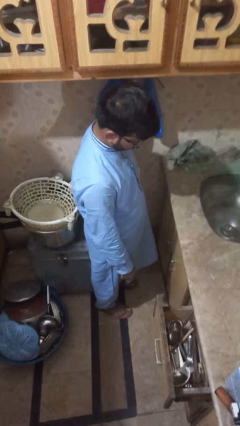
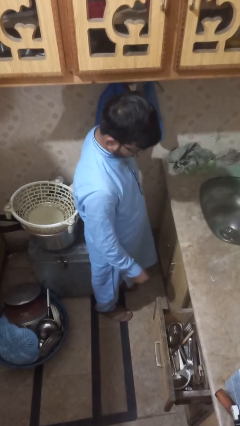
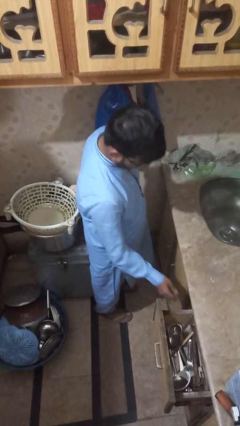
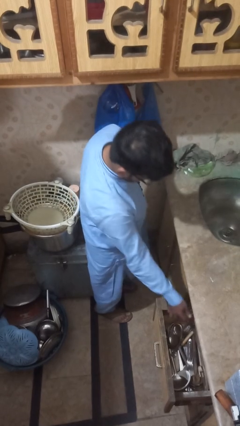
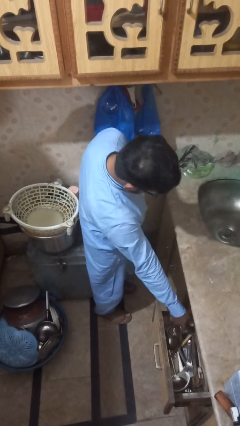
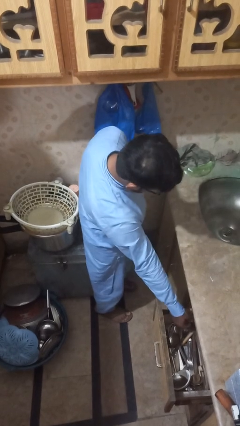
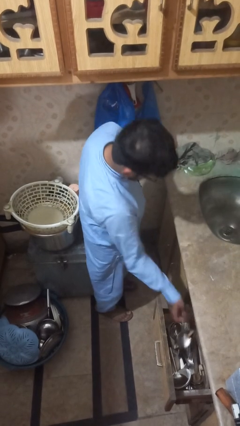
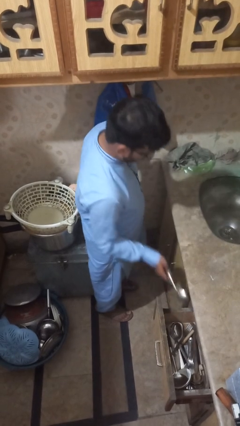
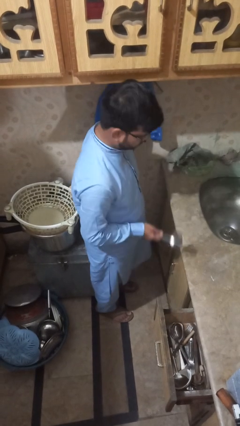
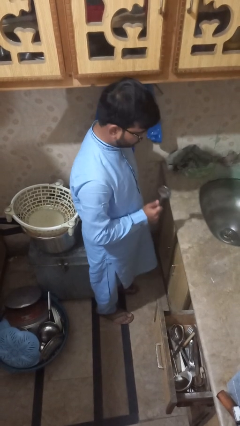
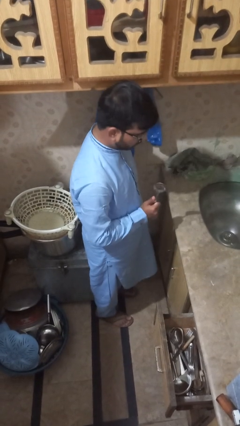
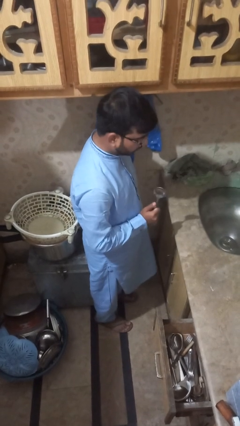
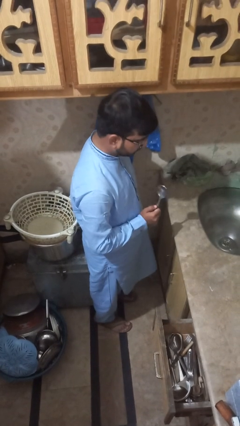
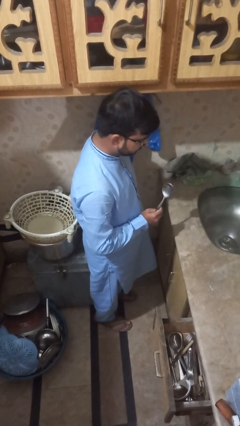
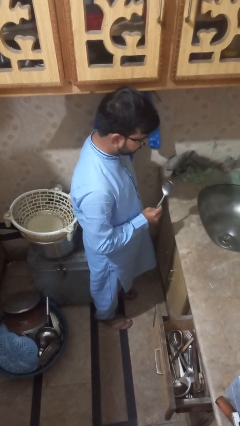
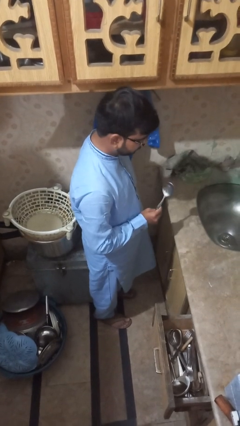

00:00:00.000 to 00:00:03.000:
person takes object from kitchen drawer

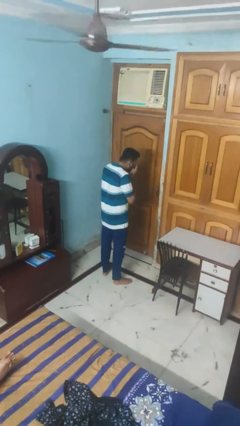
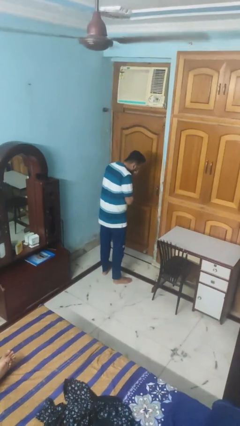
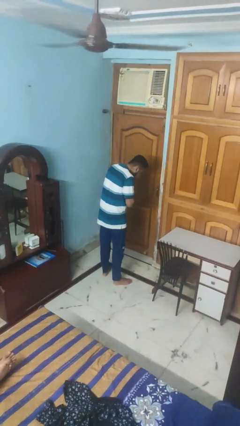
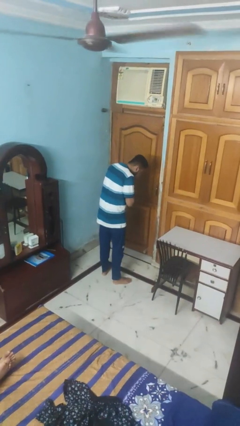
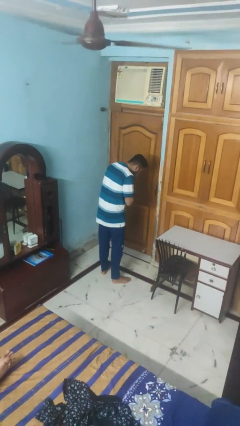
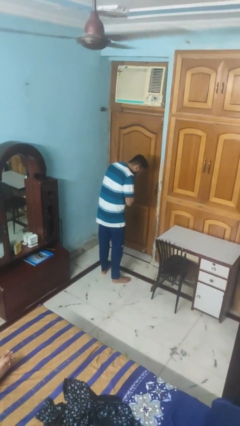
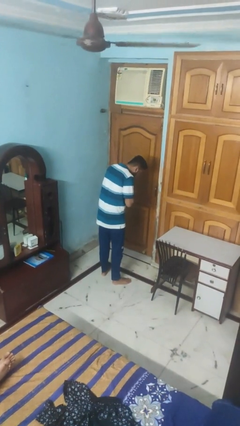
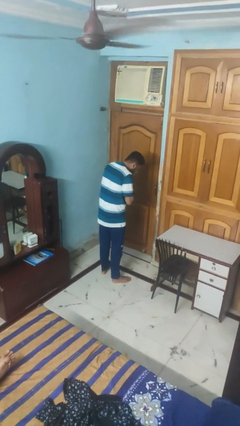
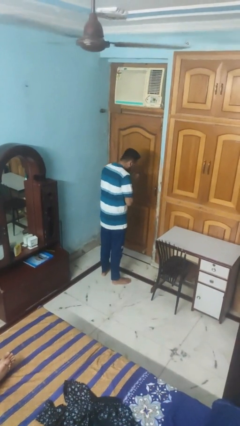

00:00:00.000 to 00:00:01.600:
person sneezes into hand

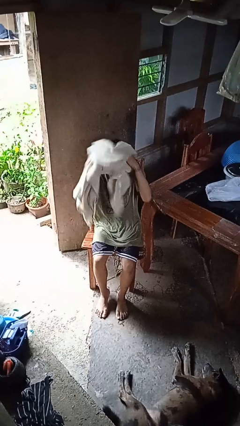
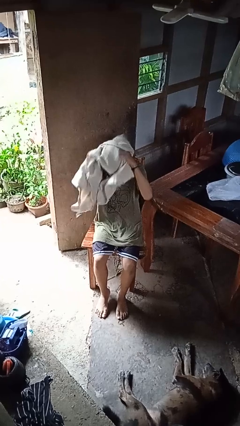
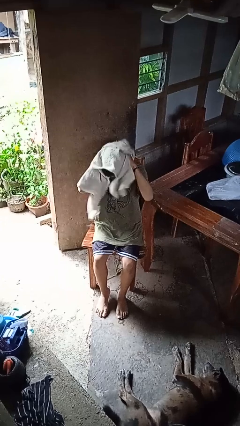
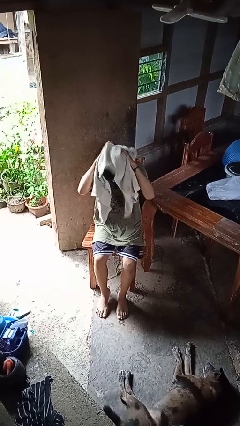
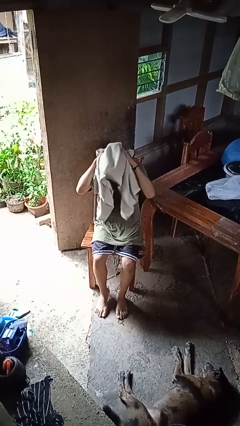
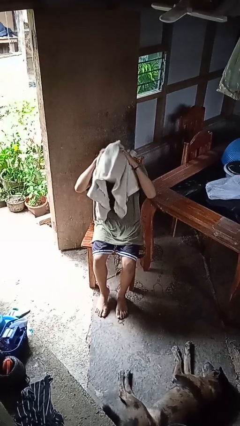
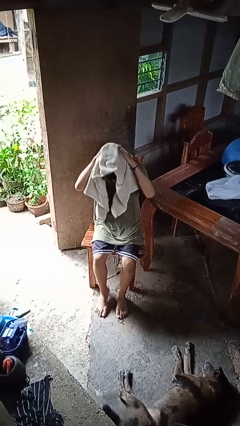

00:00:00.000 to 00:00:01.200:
person dries hair with towel

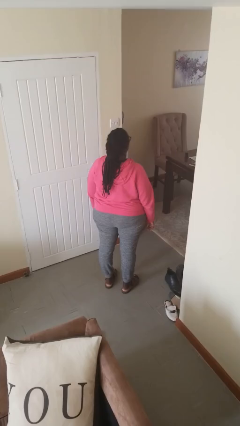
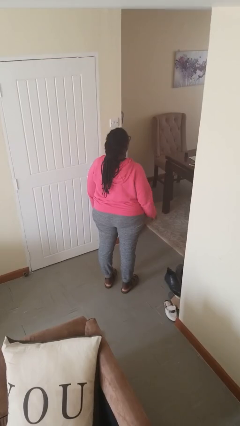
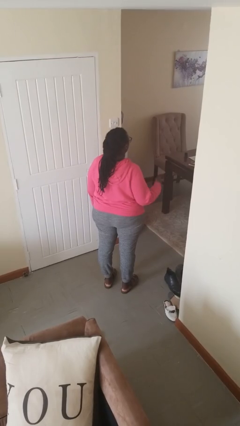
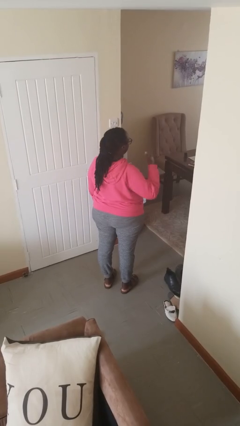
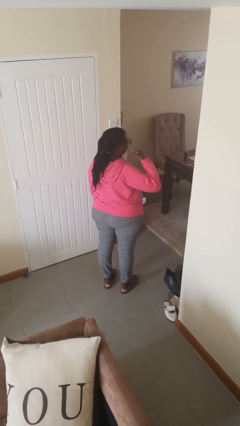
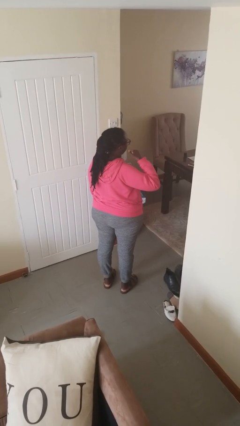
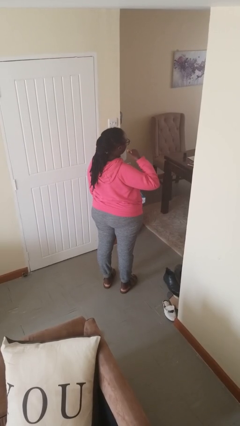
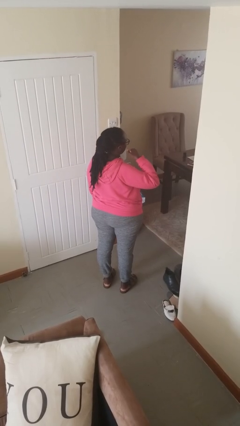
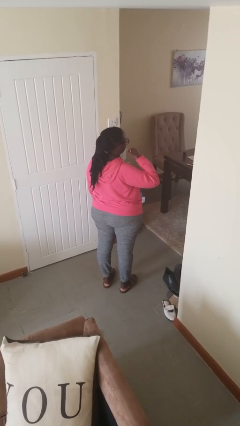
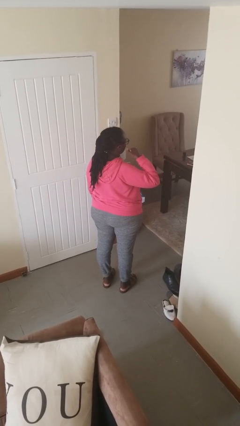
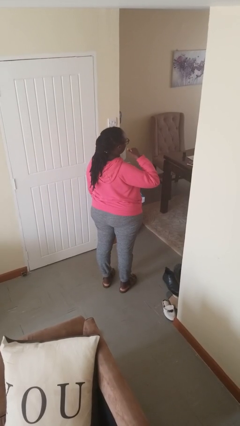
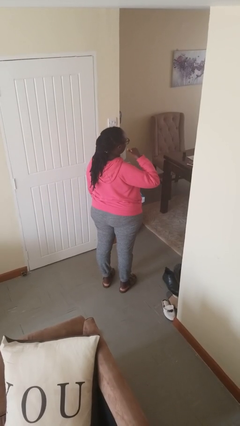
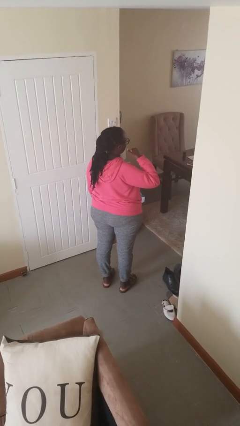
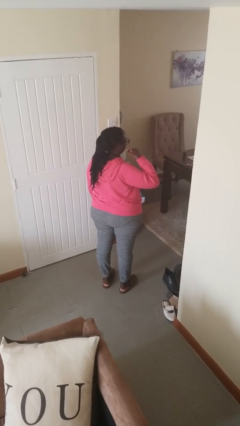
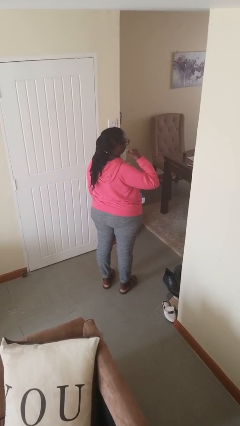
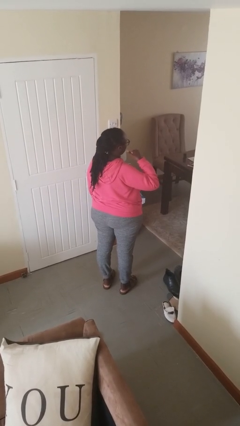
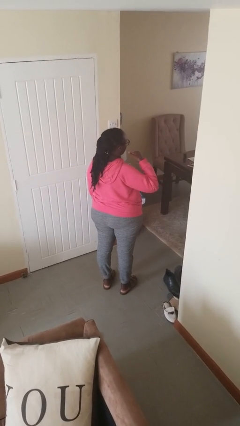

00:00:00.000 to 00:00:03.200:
person gestures call me

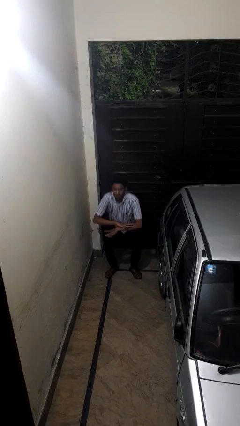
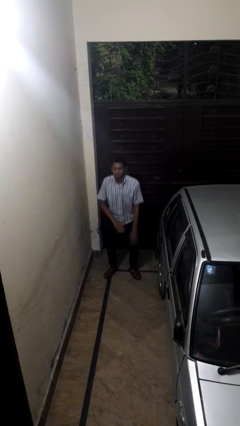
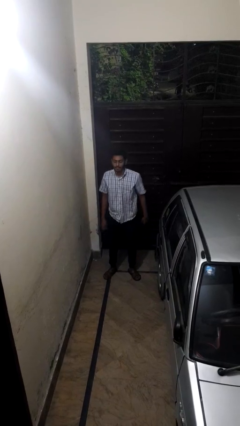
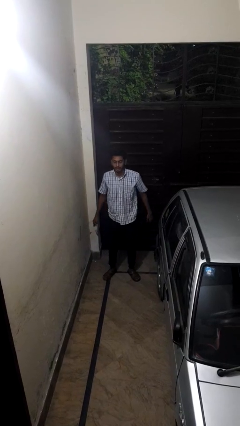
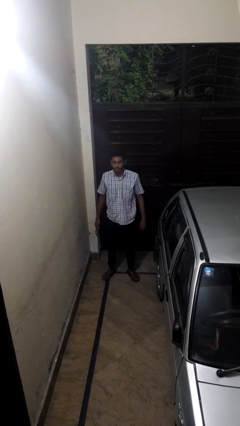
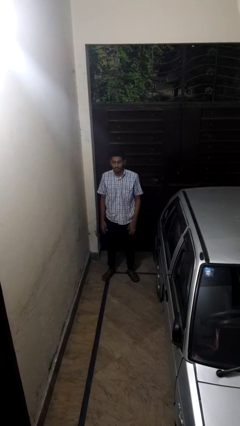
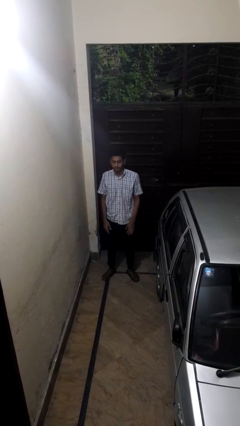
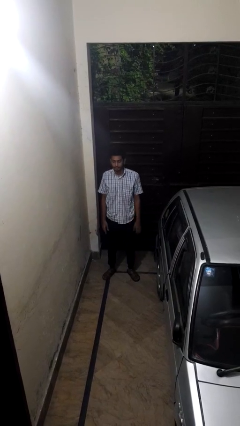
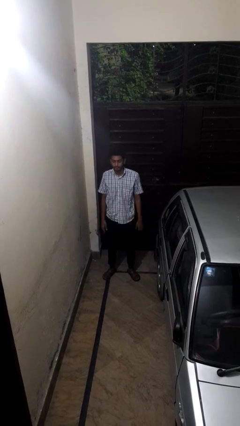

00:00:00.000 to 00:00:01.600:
person stands up

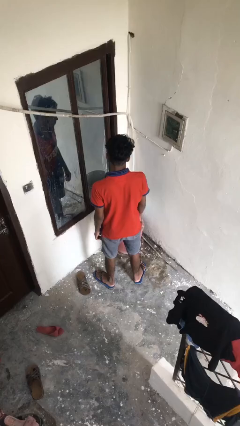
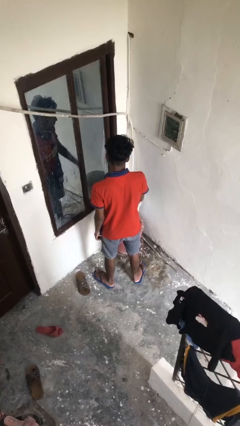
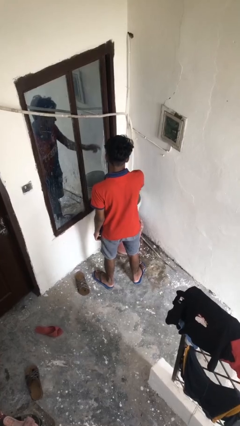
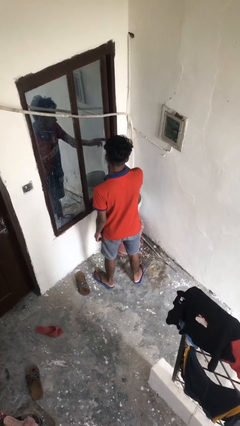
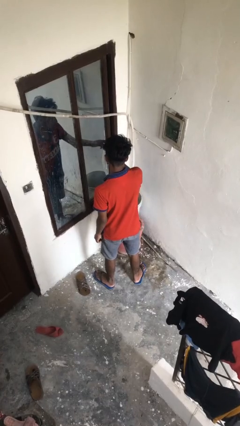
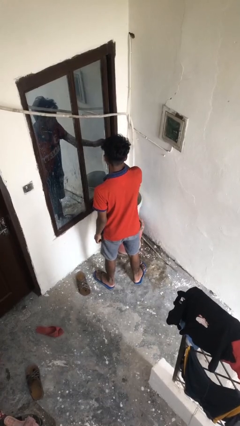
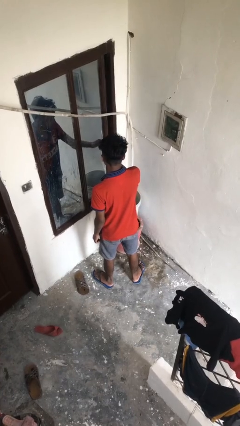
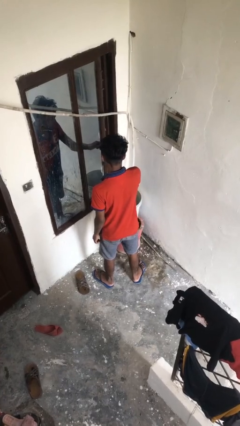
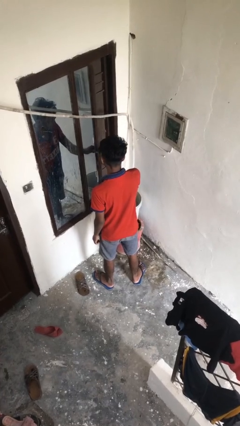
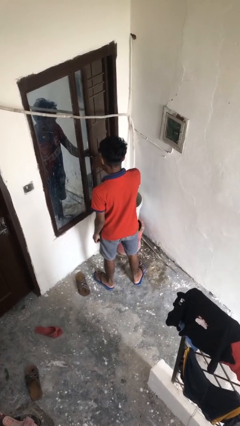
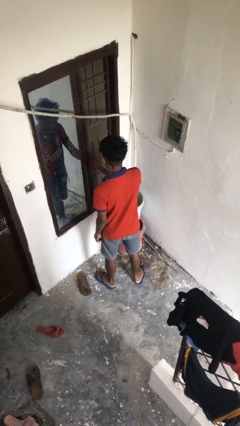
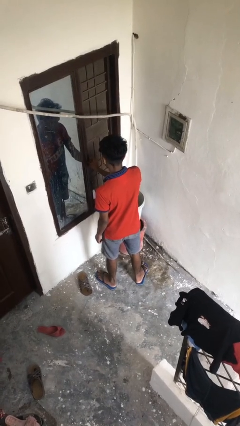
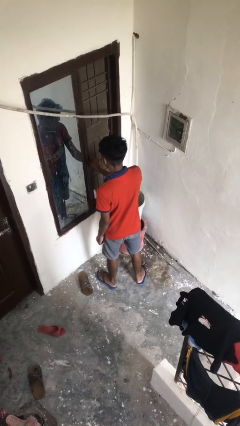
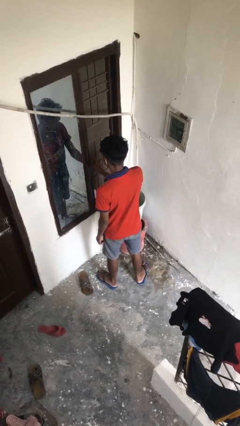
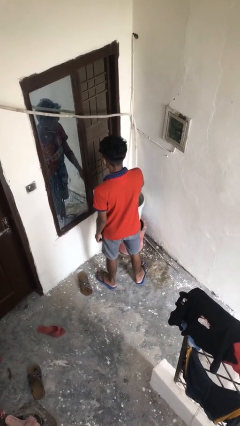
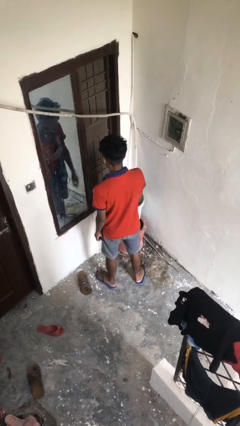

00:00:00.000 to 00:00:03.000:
person opens home window

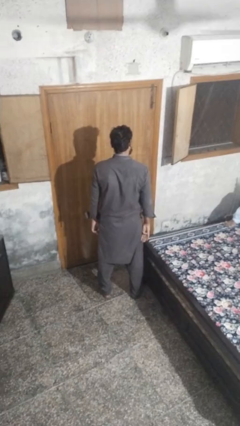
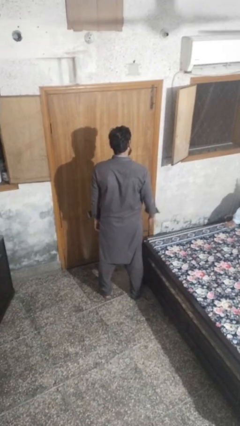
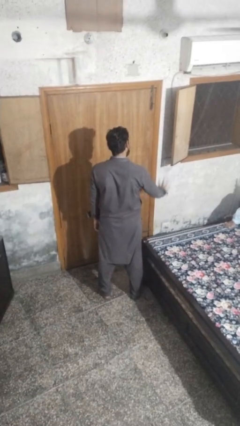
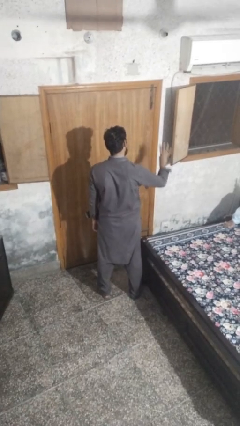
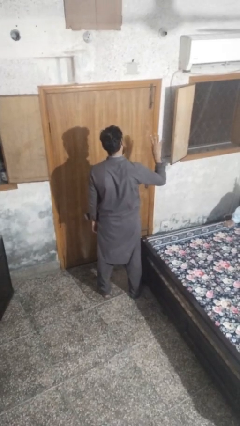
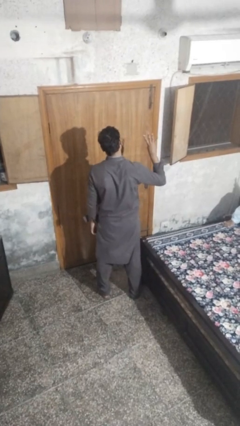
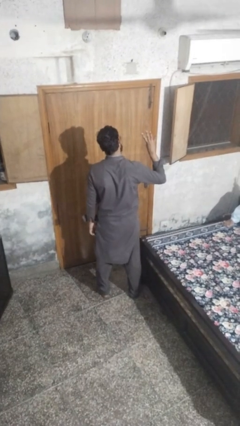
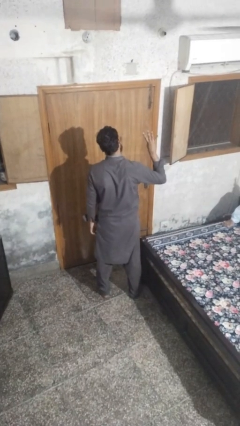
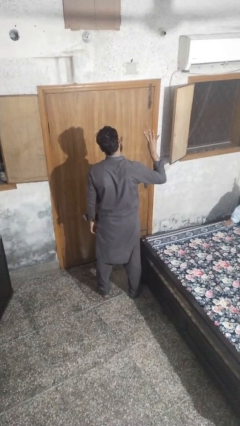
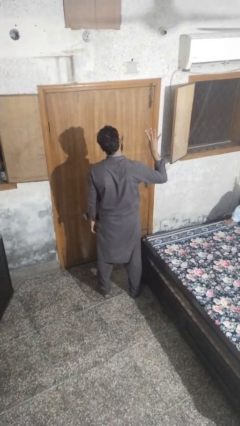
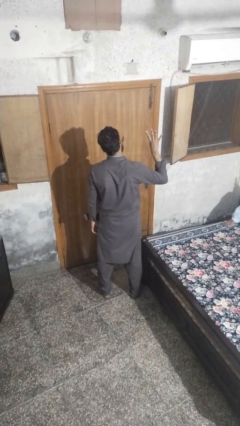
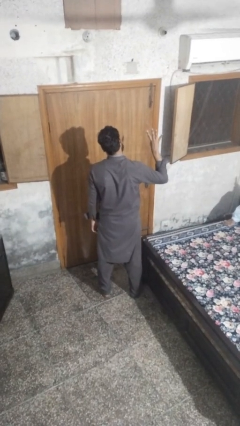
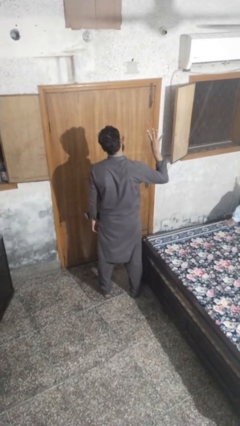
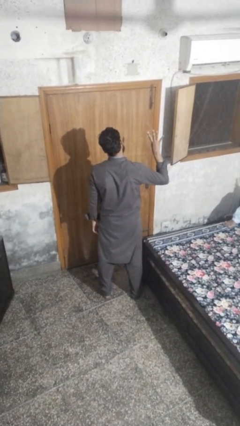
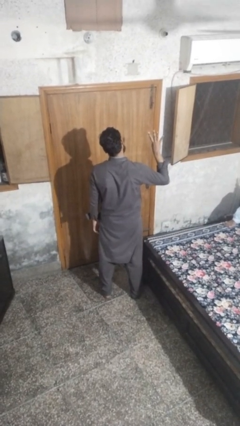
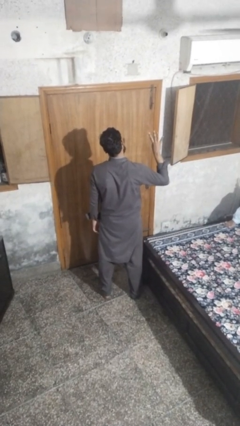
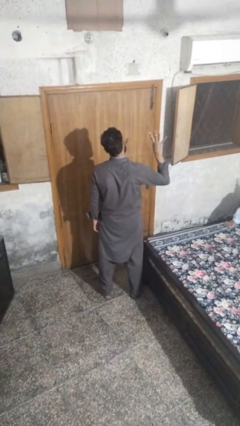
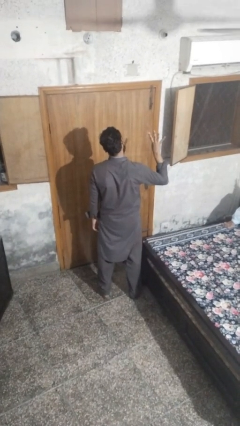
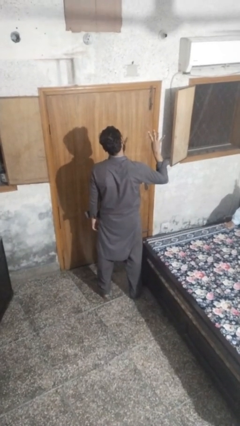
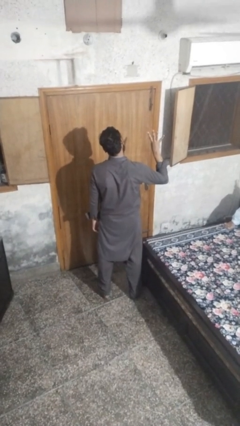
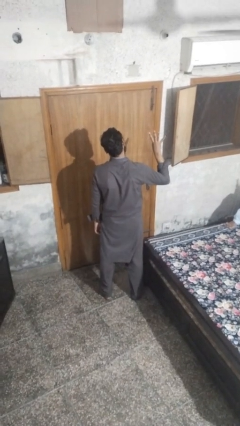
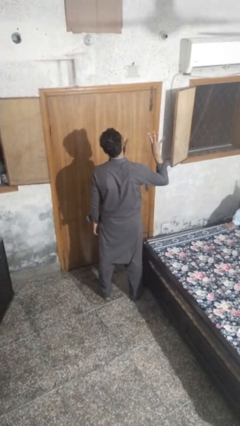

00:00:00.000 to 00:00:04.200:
person gestures number four
